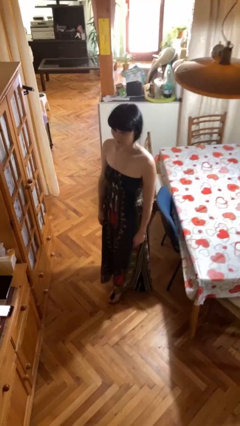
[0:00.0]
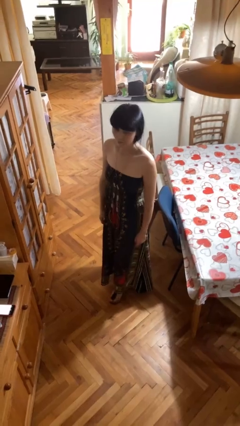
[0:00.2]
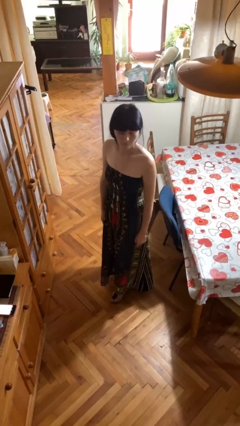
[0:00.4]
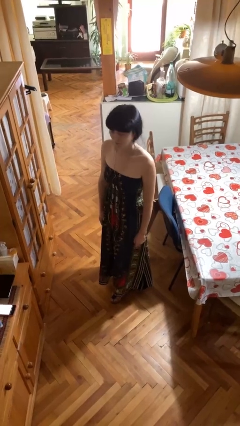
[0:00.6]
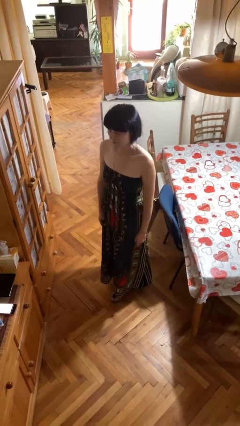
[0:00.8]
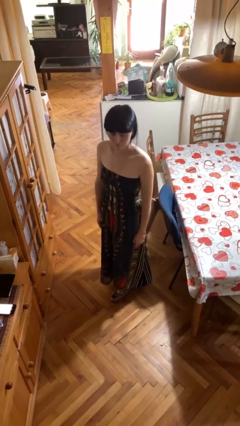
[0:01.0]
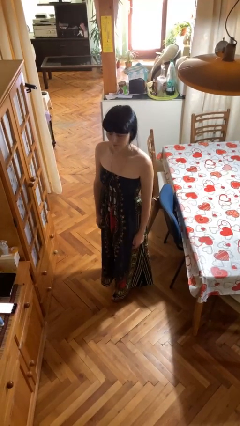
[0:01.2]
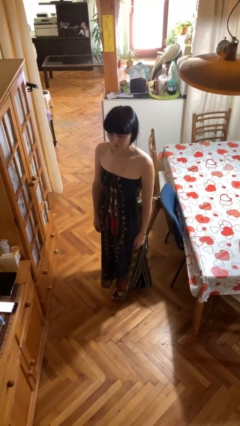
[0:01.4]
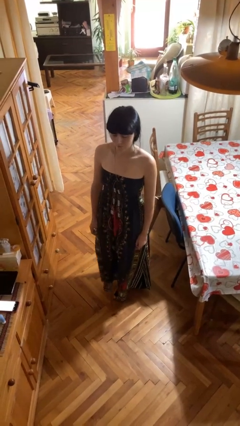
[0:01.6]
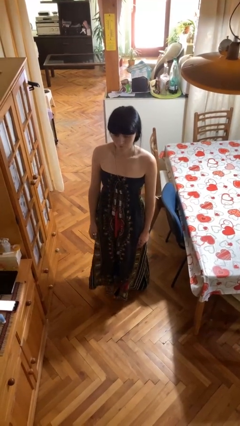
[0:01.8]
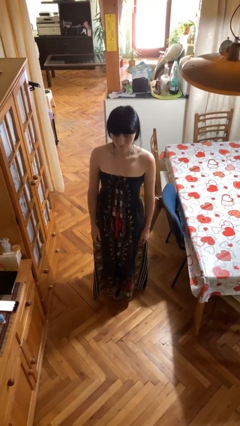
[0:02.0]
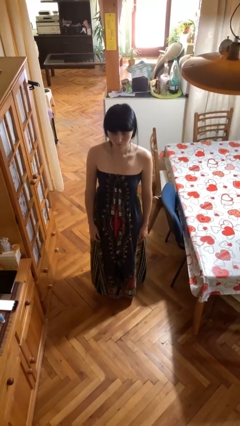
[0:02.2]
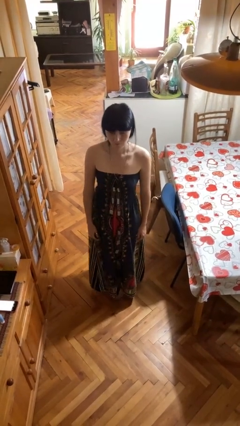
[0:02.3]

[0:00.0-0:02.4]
person shakes head

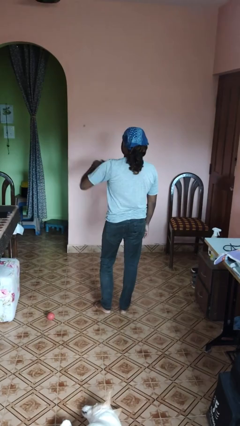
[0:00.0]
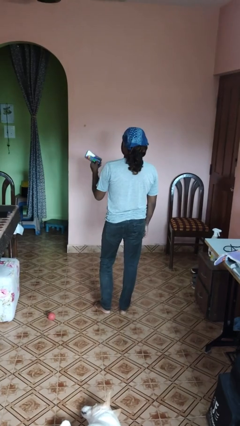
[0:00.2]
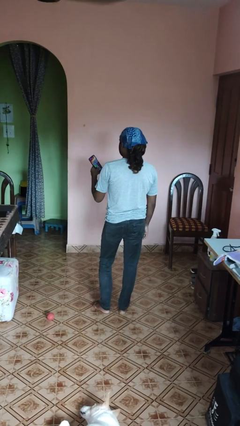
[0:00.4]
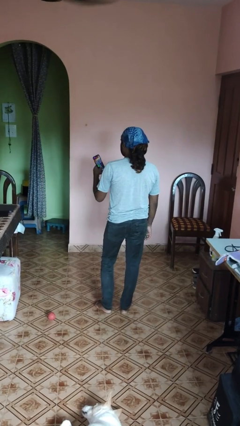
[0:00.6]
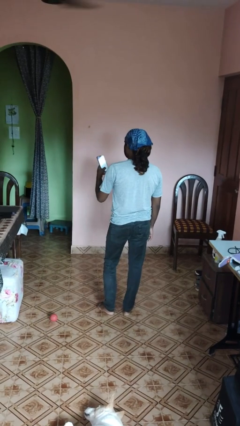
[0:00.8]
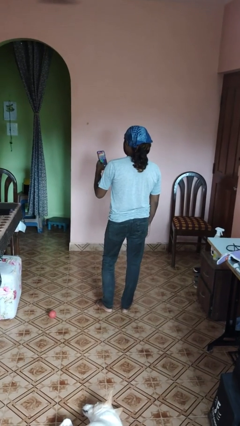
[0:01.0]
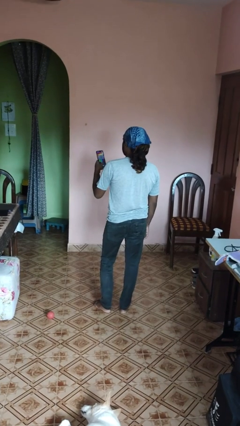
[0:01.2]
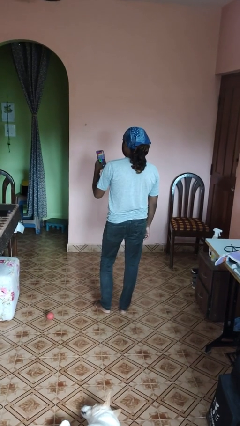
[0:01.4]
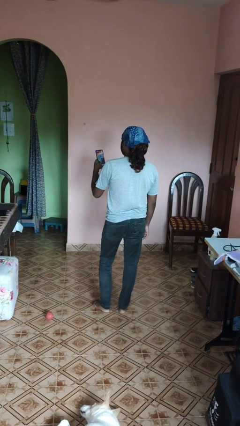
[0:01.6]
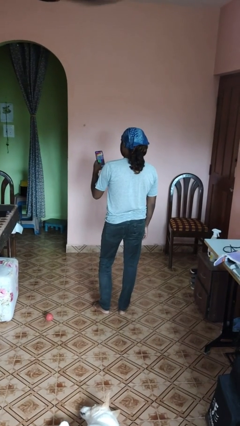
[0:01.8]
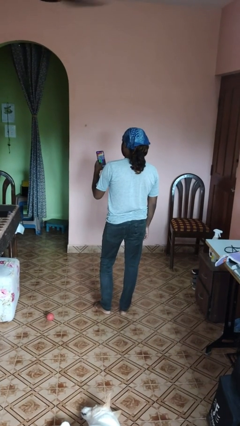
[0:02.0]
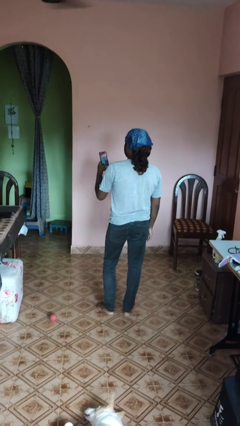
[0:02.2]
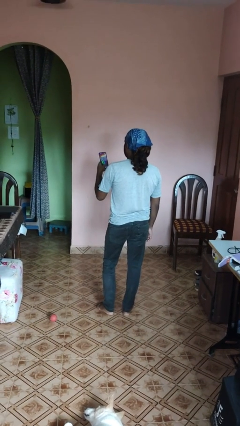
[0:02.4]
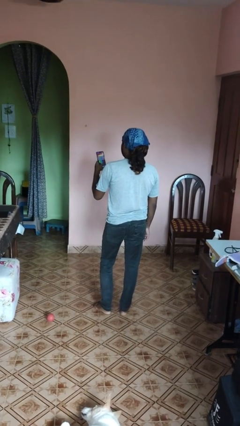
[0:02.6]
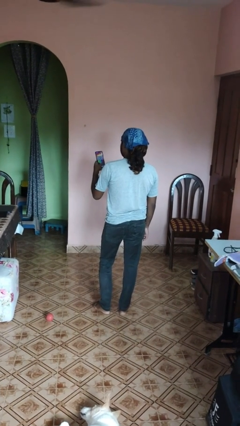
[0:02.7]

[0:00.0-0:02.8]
person takes phone from pocket

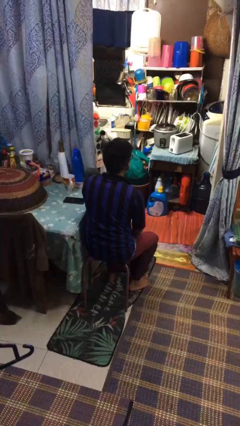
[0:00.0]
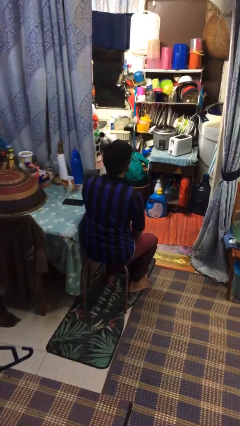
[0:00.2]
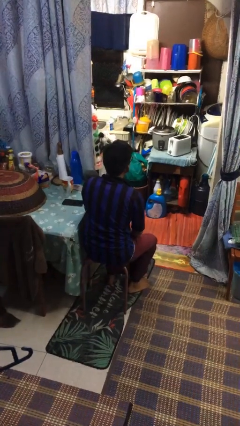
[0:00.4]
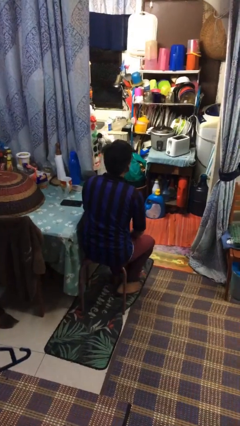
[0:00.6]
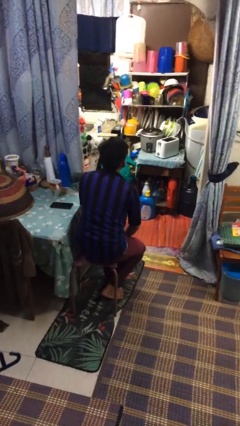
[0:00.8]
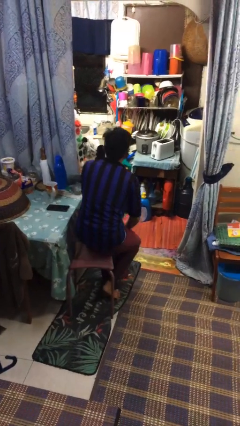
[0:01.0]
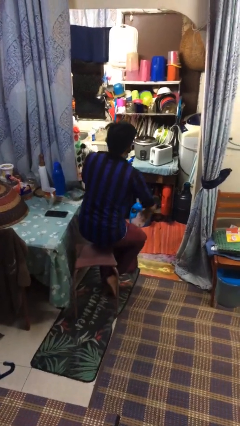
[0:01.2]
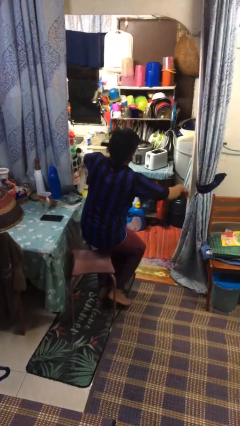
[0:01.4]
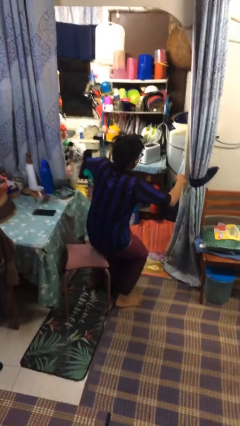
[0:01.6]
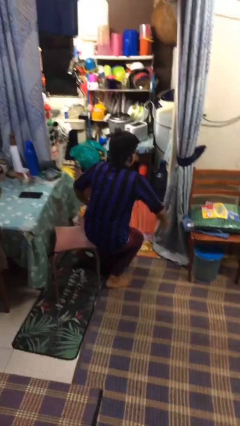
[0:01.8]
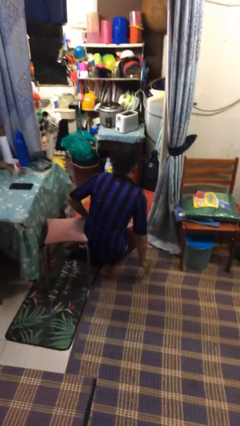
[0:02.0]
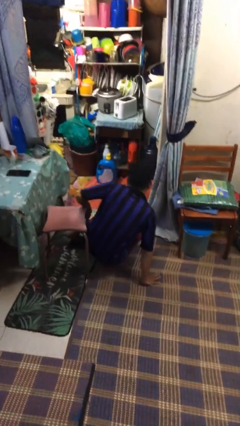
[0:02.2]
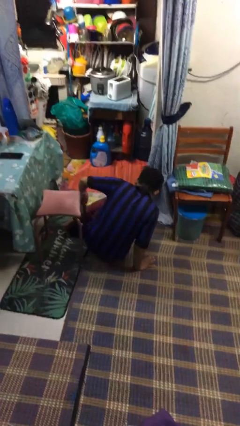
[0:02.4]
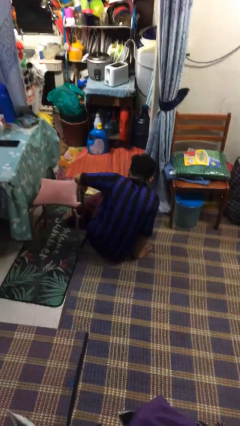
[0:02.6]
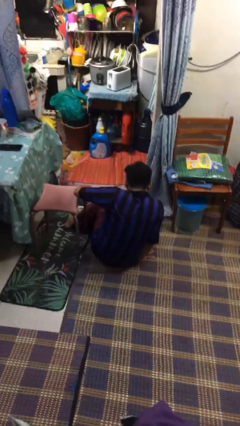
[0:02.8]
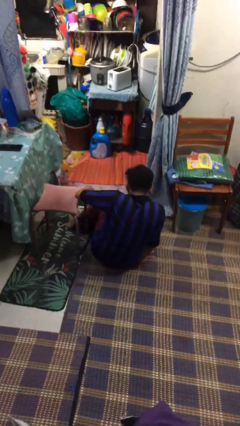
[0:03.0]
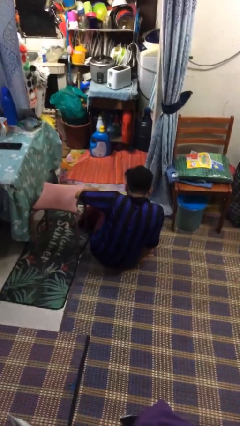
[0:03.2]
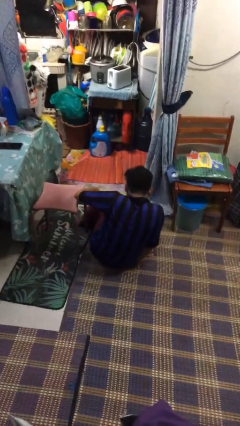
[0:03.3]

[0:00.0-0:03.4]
person falls from chair

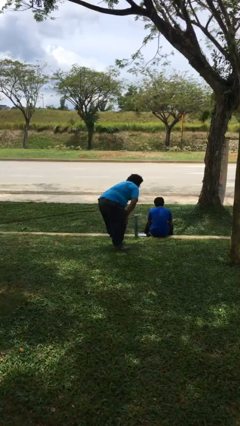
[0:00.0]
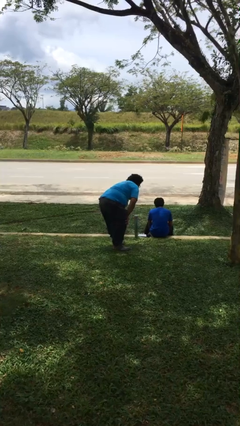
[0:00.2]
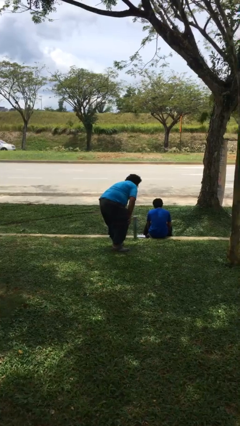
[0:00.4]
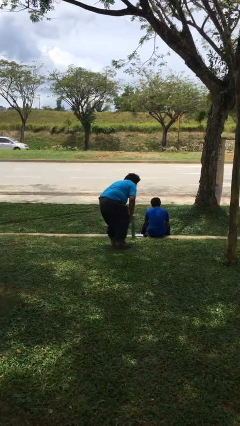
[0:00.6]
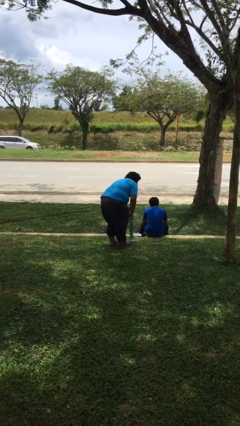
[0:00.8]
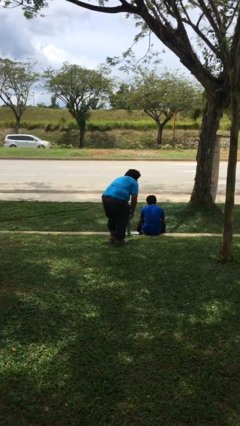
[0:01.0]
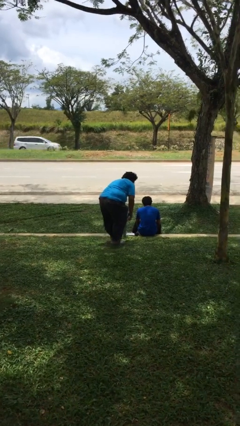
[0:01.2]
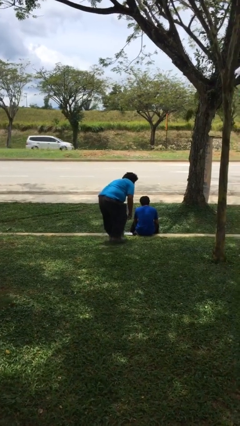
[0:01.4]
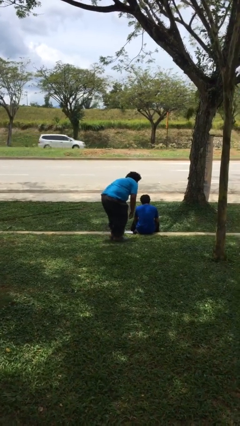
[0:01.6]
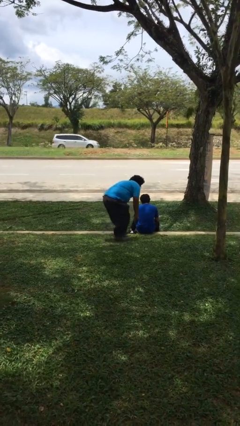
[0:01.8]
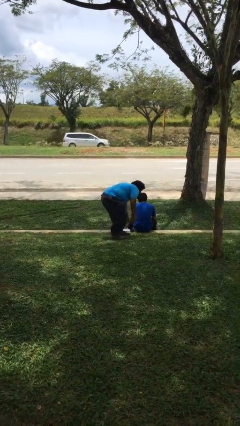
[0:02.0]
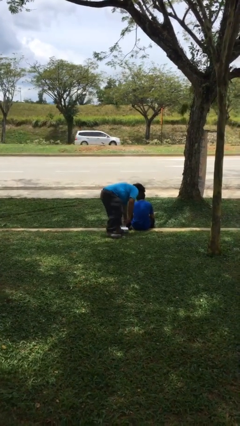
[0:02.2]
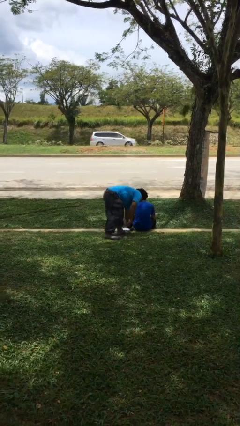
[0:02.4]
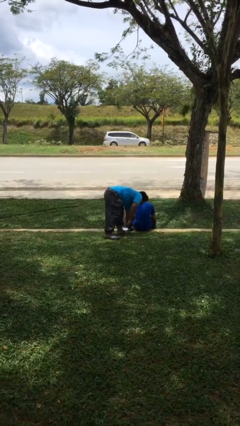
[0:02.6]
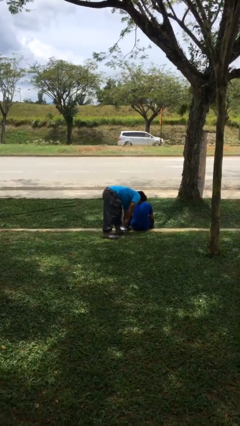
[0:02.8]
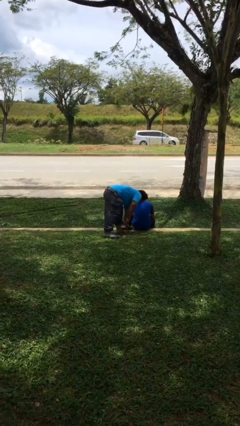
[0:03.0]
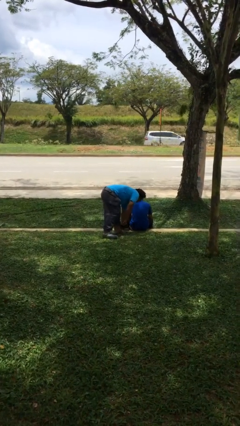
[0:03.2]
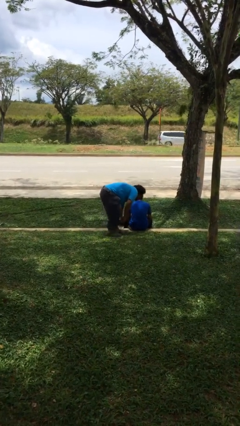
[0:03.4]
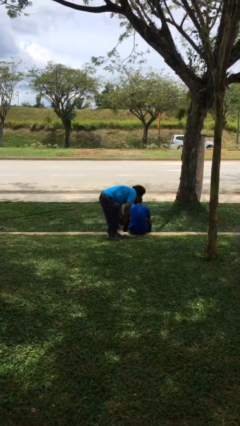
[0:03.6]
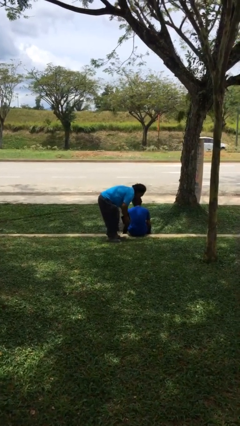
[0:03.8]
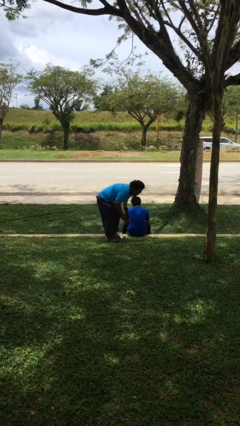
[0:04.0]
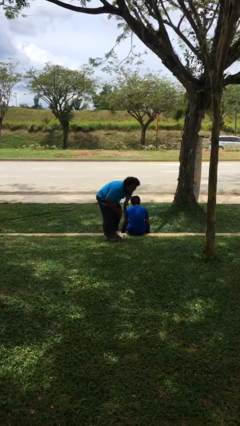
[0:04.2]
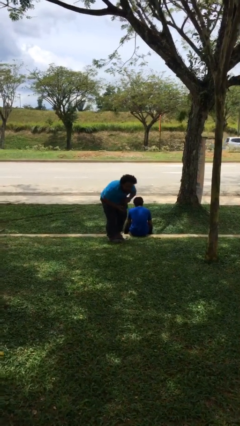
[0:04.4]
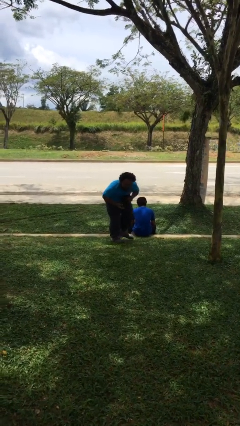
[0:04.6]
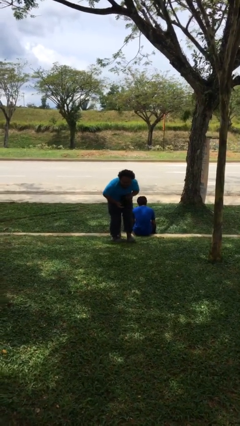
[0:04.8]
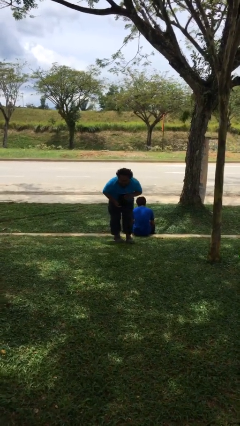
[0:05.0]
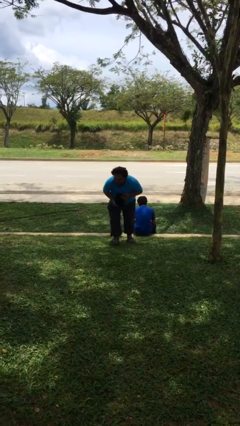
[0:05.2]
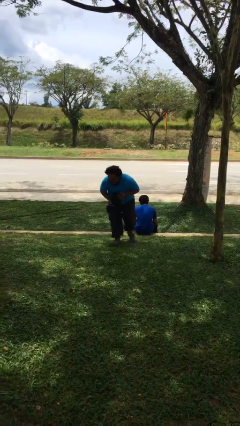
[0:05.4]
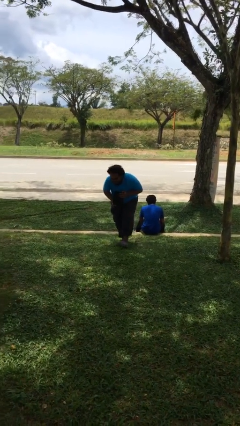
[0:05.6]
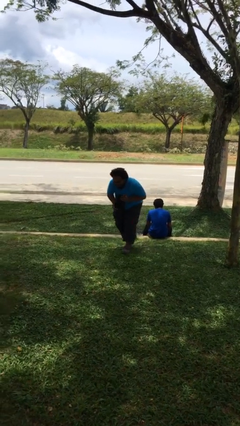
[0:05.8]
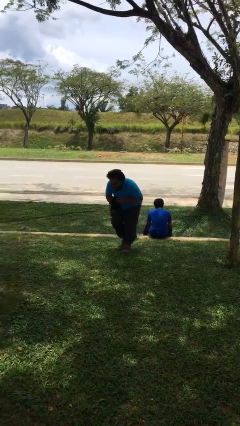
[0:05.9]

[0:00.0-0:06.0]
person steals object from person

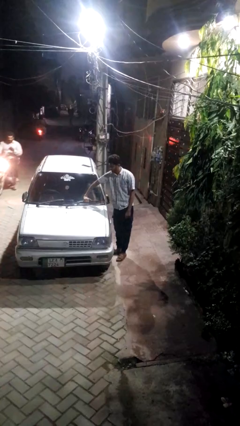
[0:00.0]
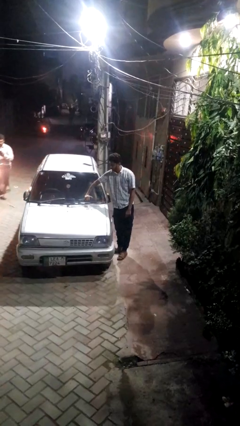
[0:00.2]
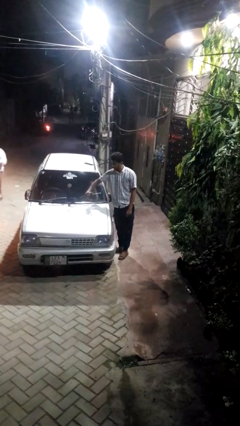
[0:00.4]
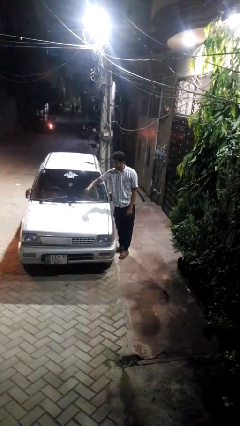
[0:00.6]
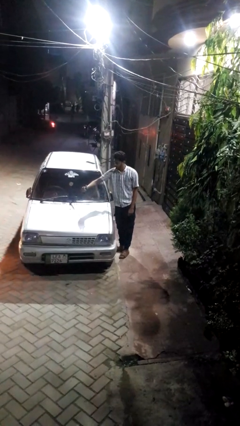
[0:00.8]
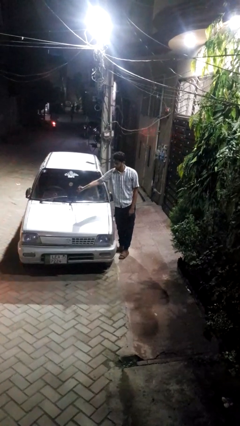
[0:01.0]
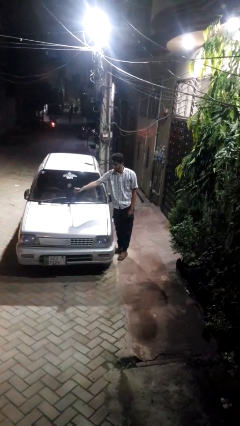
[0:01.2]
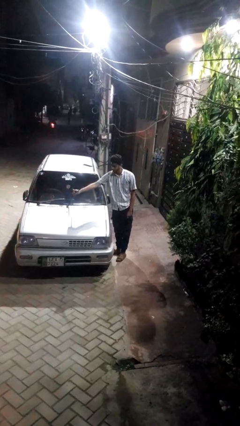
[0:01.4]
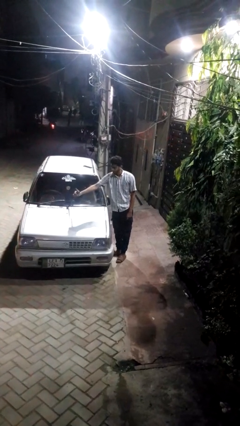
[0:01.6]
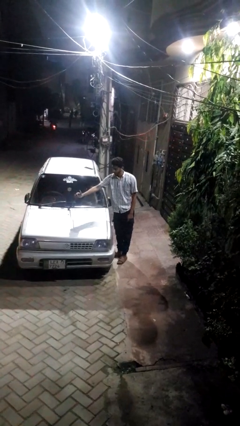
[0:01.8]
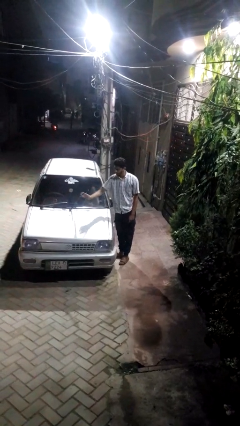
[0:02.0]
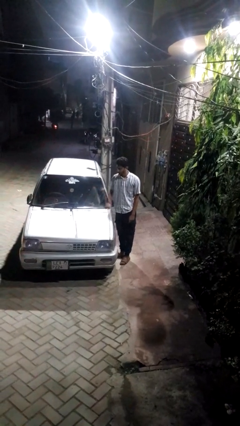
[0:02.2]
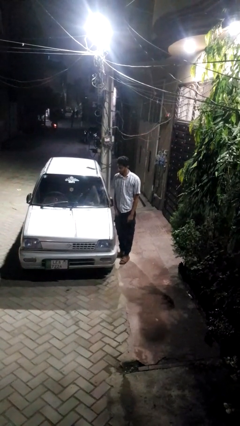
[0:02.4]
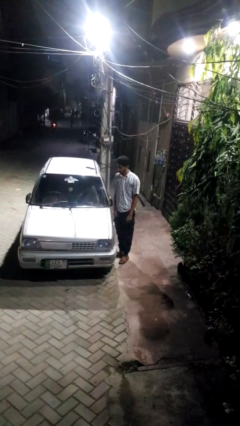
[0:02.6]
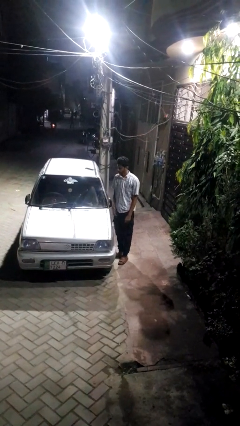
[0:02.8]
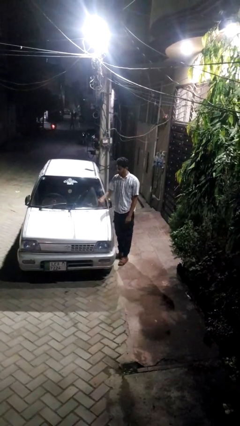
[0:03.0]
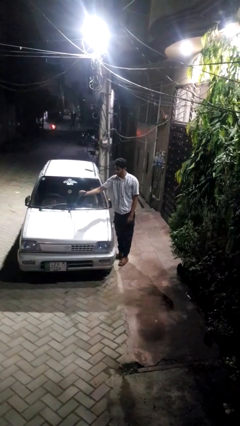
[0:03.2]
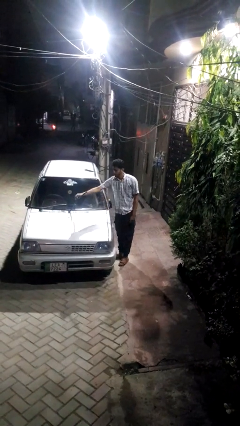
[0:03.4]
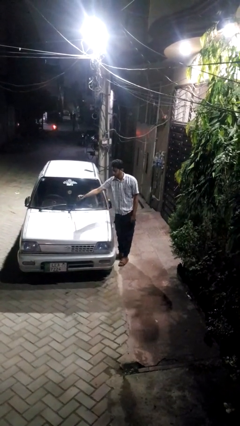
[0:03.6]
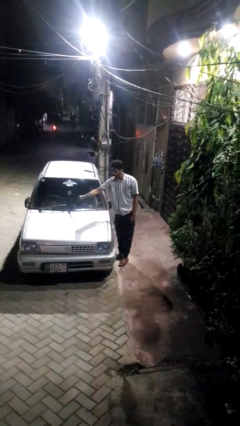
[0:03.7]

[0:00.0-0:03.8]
person flips up car wipers
